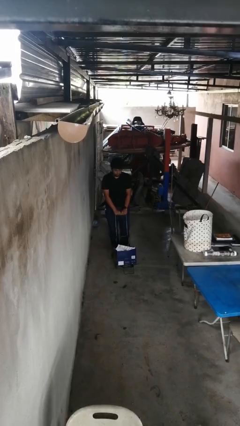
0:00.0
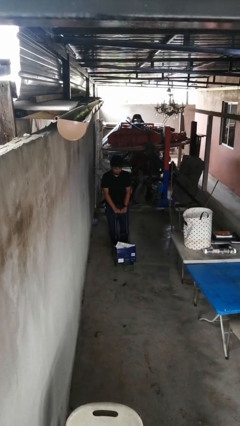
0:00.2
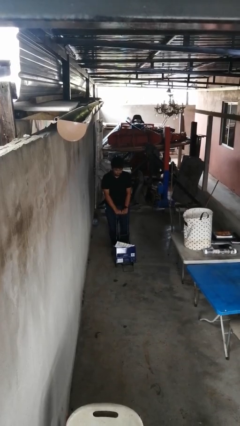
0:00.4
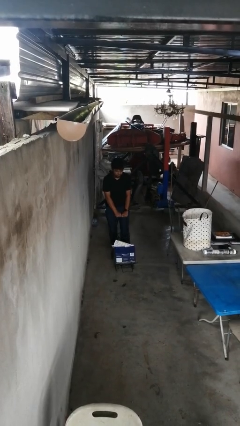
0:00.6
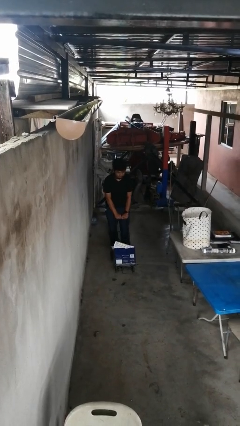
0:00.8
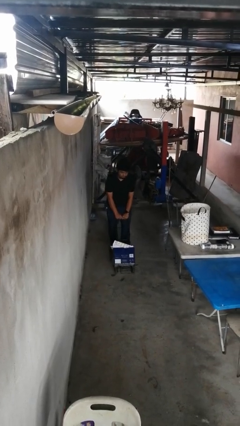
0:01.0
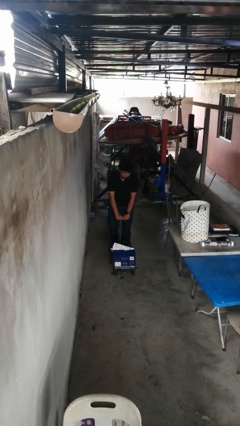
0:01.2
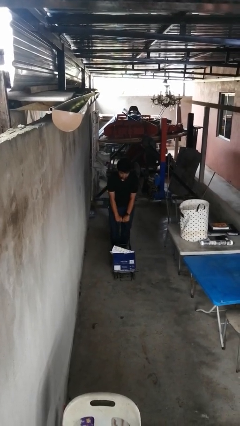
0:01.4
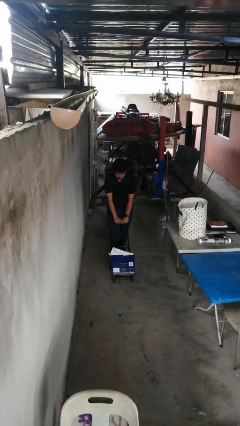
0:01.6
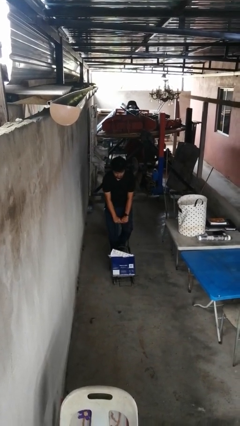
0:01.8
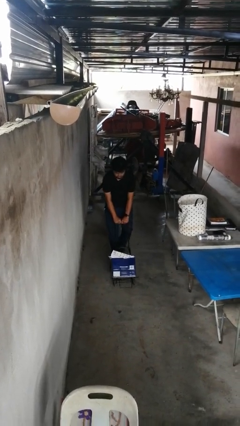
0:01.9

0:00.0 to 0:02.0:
person pushes wheeled cart

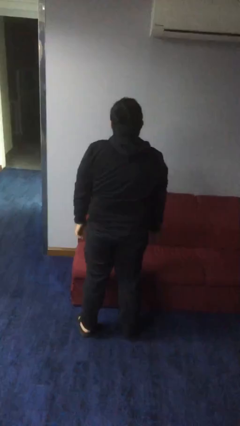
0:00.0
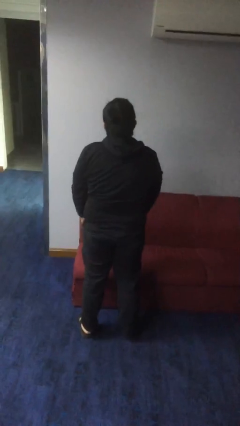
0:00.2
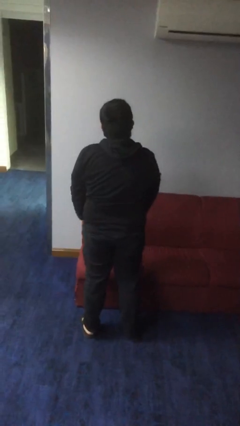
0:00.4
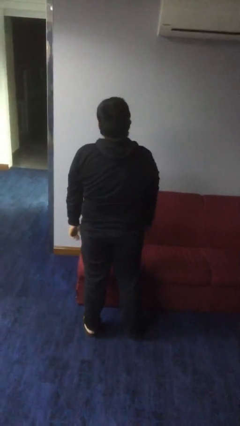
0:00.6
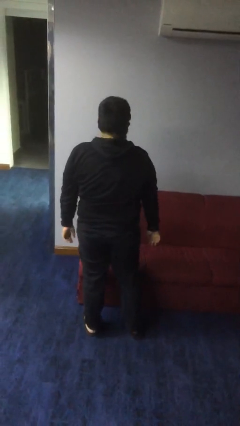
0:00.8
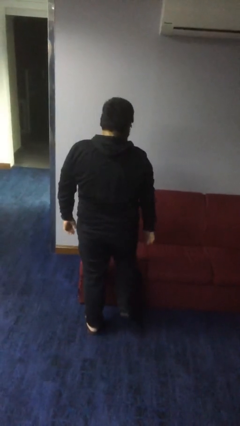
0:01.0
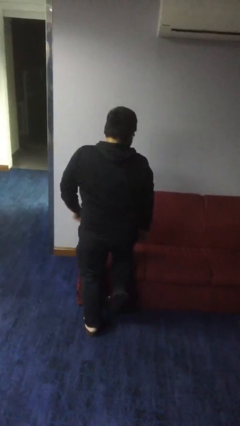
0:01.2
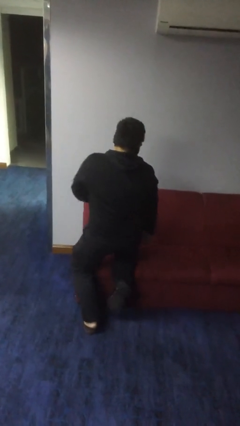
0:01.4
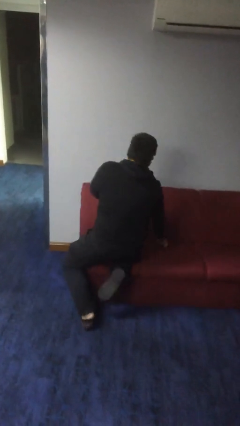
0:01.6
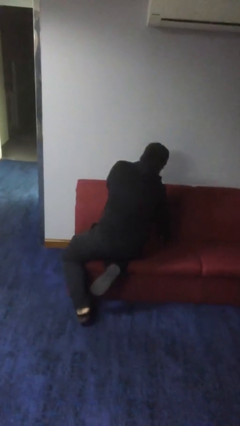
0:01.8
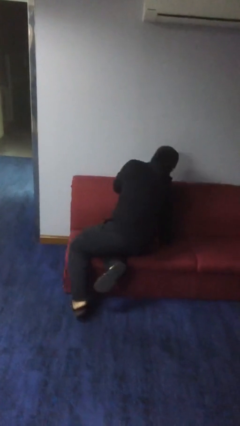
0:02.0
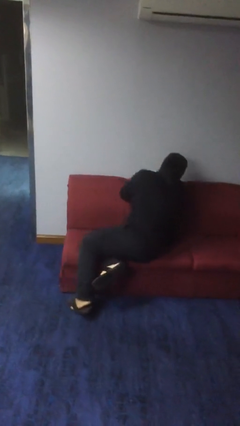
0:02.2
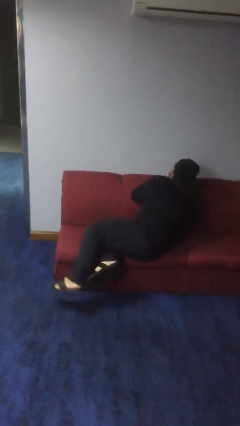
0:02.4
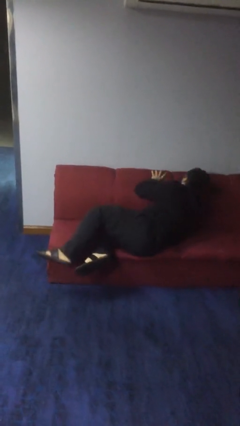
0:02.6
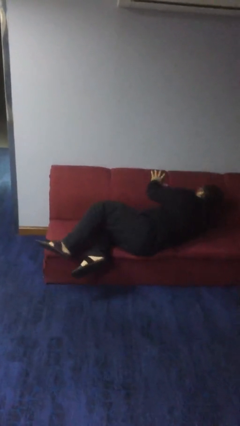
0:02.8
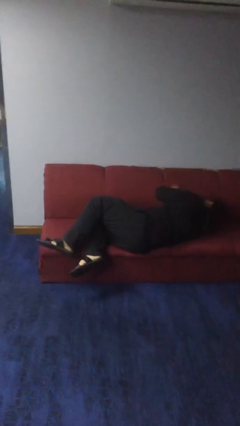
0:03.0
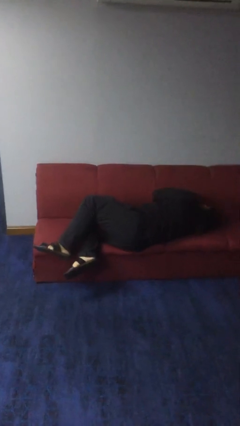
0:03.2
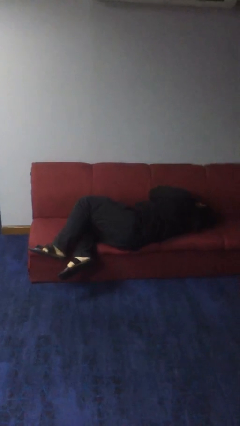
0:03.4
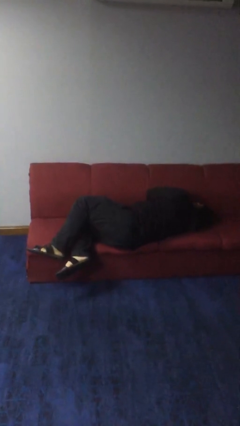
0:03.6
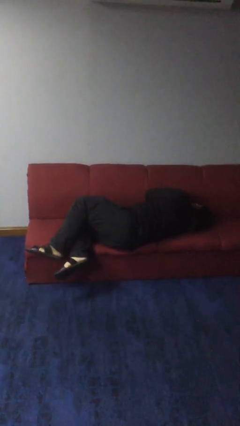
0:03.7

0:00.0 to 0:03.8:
person lies down on couch

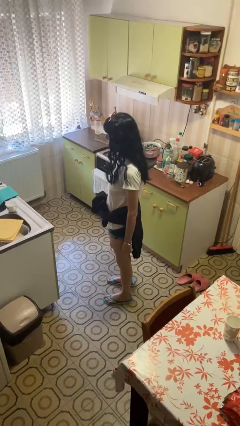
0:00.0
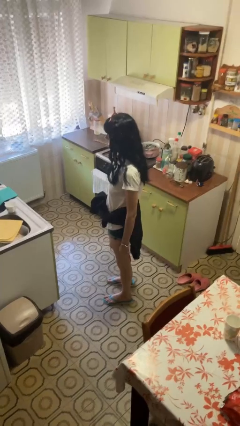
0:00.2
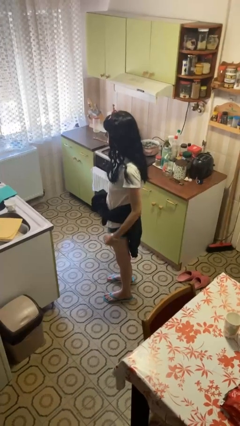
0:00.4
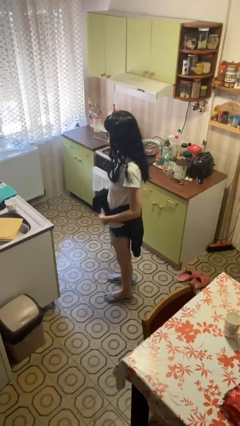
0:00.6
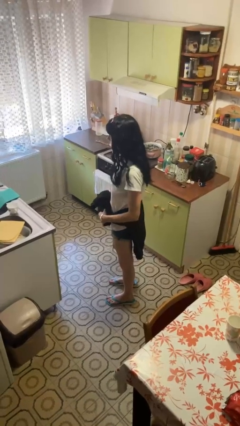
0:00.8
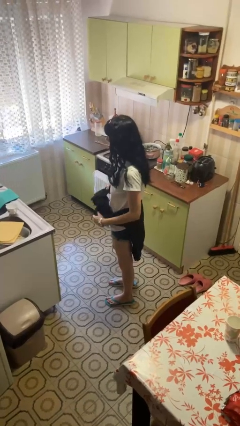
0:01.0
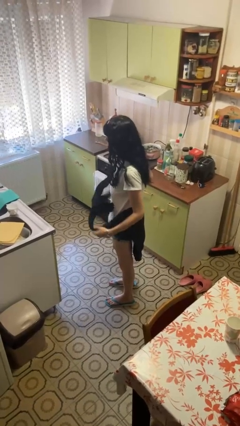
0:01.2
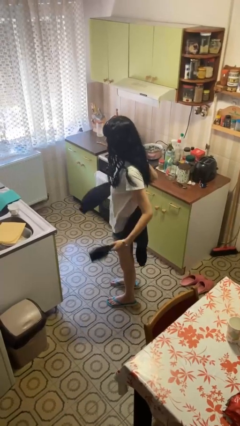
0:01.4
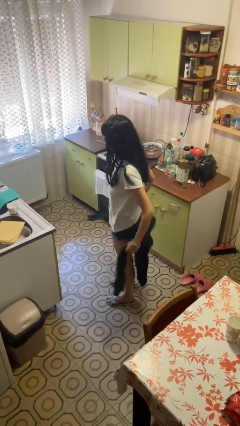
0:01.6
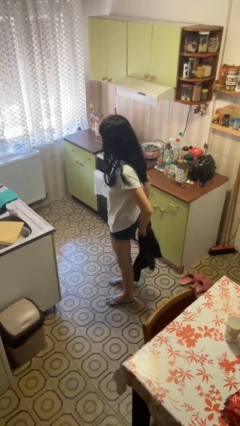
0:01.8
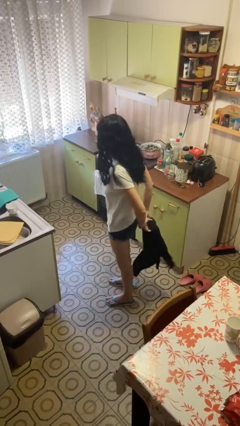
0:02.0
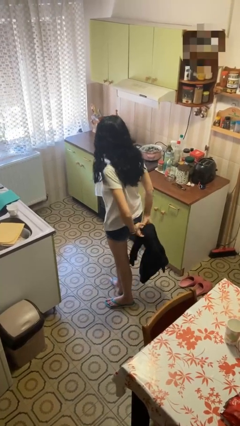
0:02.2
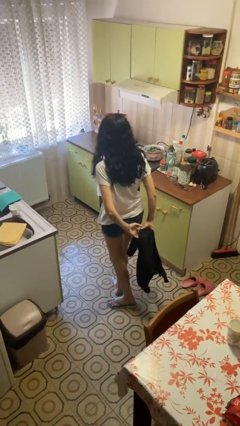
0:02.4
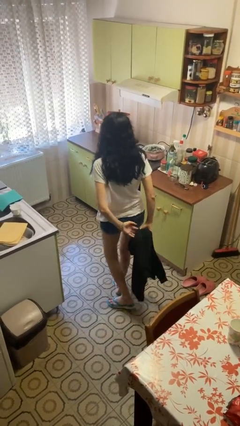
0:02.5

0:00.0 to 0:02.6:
person unties jacket around waist

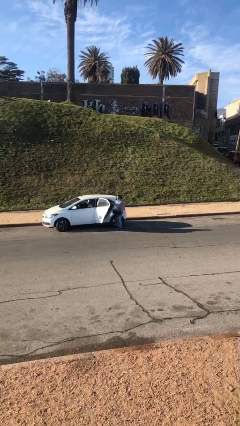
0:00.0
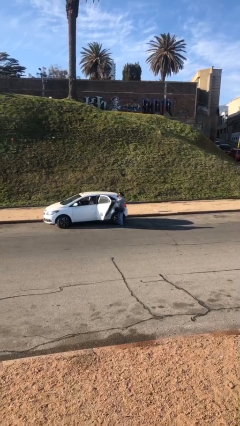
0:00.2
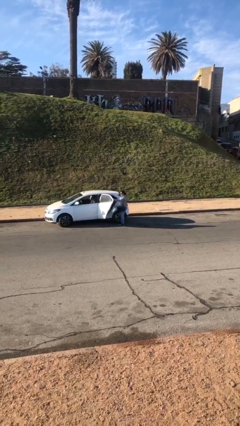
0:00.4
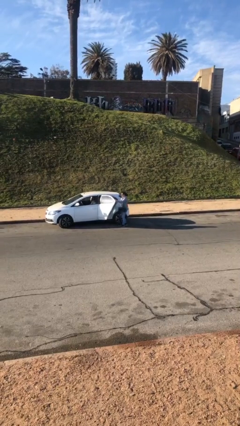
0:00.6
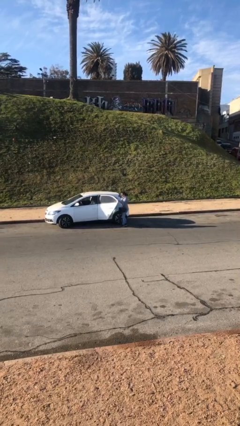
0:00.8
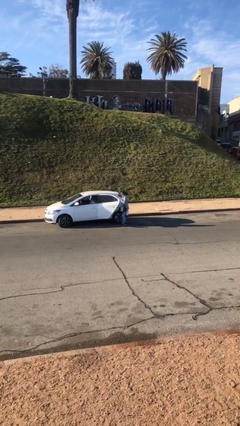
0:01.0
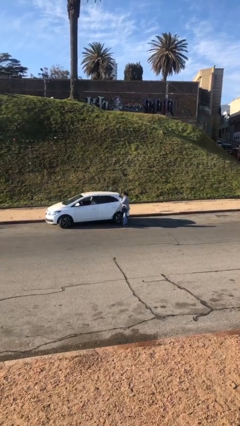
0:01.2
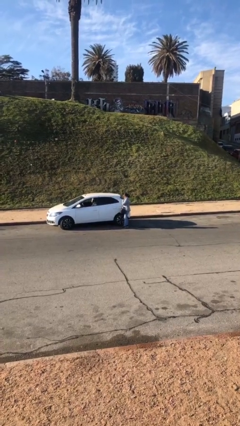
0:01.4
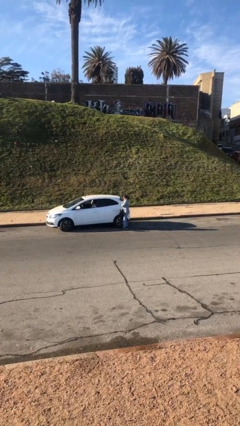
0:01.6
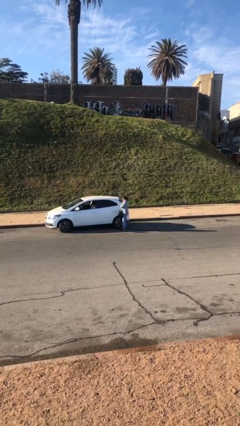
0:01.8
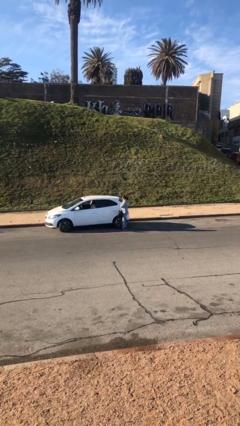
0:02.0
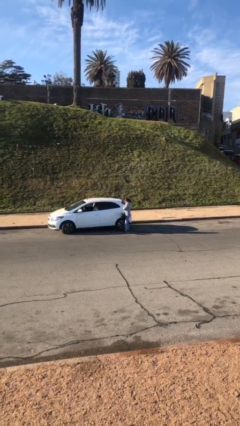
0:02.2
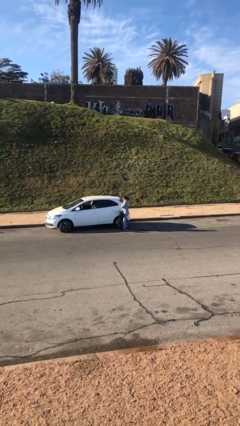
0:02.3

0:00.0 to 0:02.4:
person closes car door

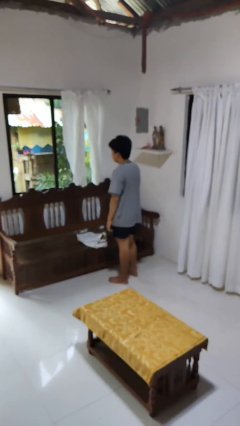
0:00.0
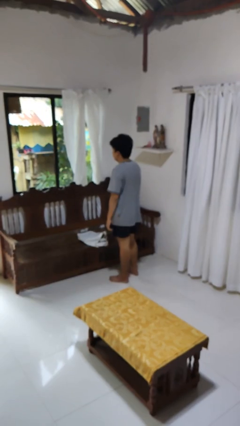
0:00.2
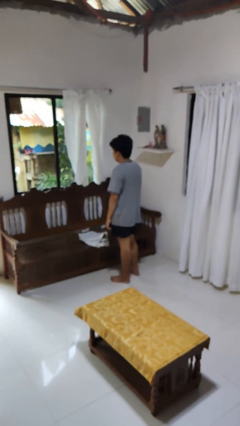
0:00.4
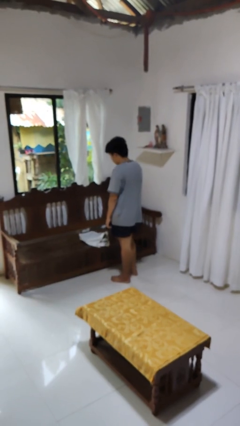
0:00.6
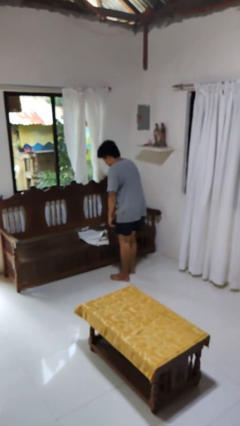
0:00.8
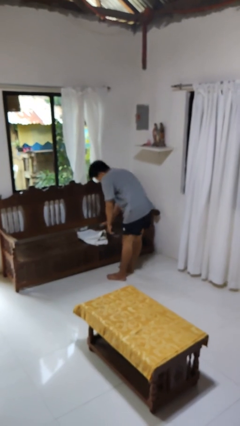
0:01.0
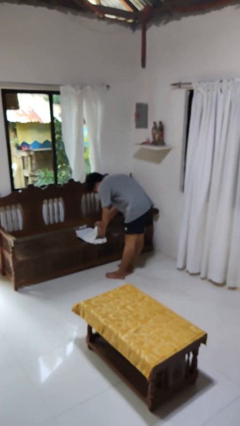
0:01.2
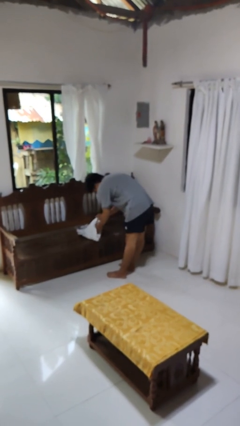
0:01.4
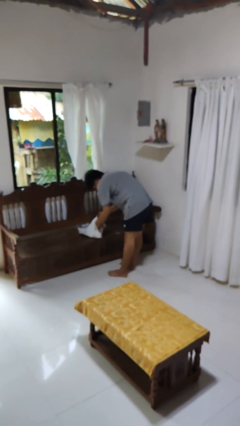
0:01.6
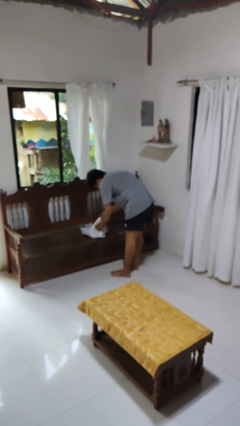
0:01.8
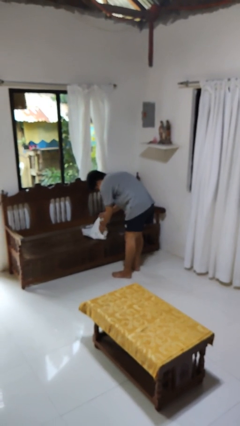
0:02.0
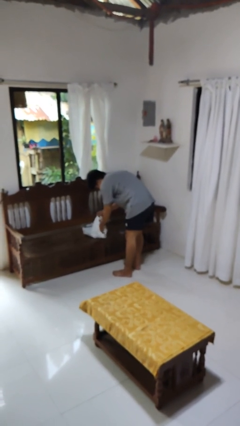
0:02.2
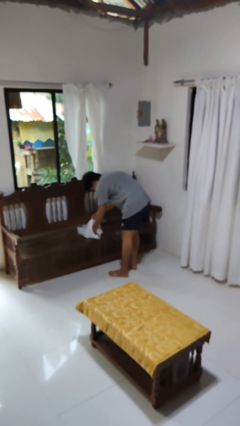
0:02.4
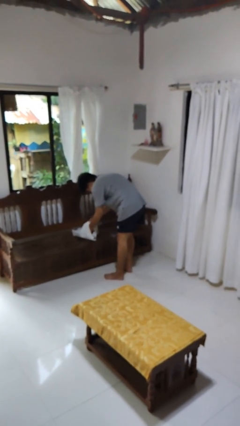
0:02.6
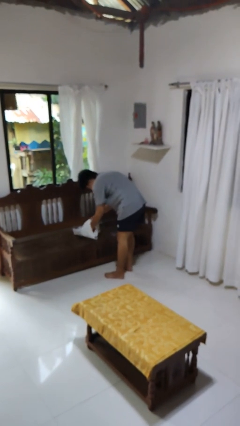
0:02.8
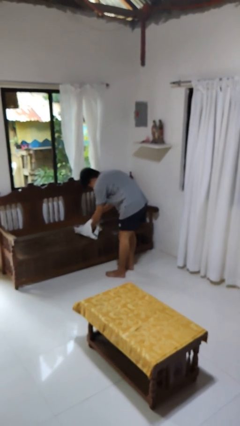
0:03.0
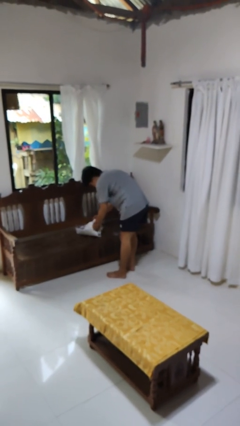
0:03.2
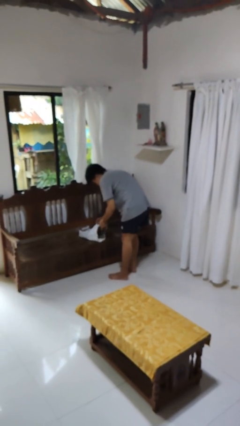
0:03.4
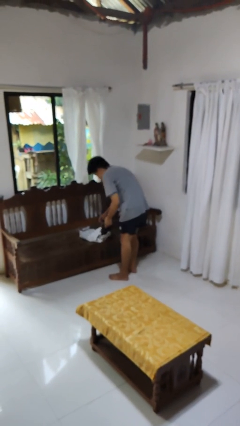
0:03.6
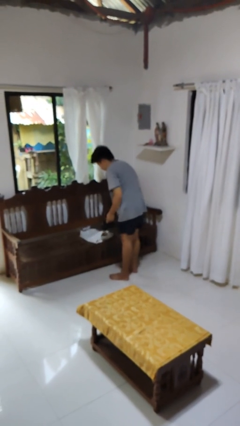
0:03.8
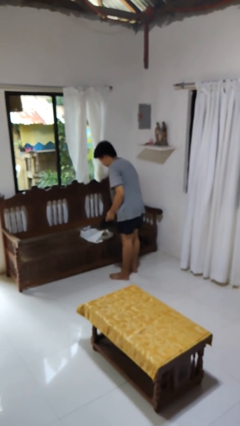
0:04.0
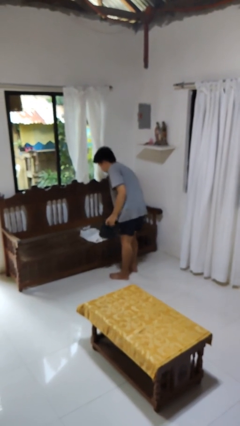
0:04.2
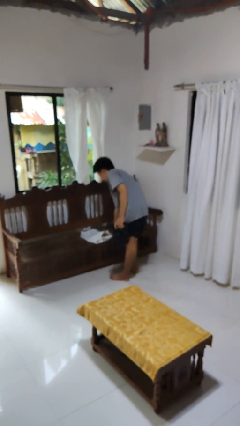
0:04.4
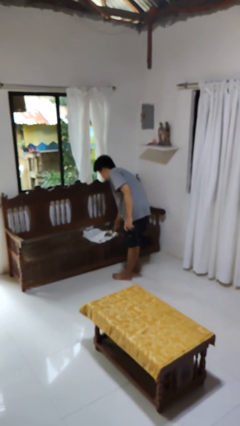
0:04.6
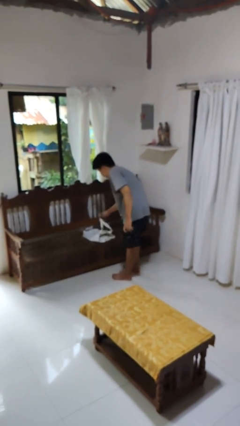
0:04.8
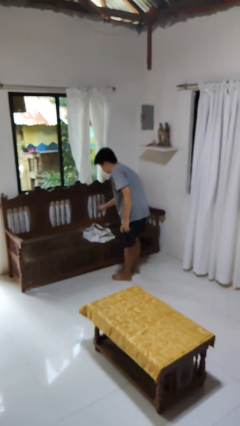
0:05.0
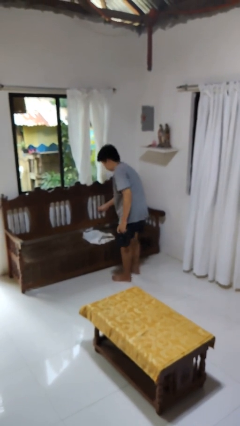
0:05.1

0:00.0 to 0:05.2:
person takes object from bag

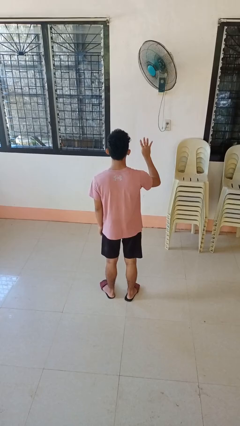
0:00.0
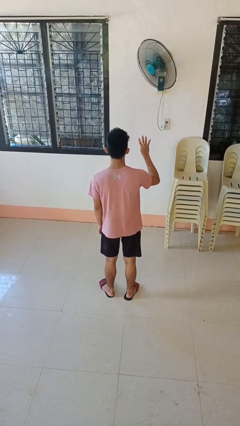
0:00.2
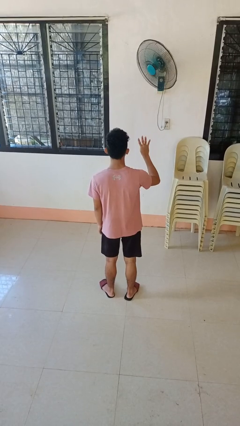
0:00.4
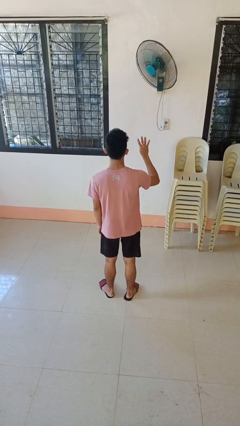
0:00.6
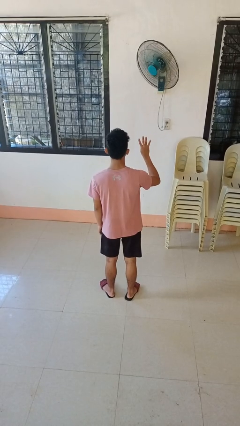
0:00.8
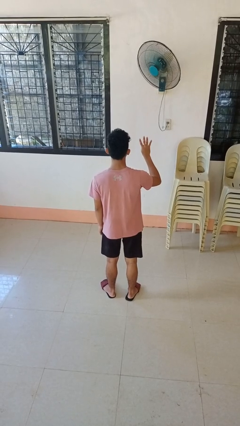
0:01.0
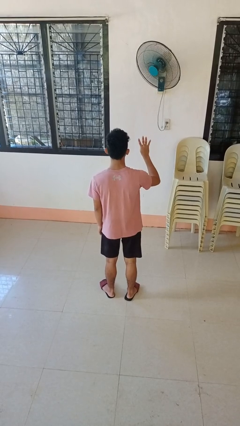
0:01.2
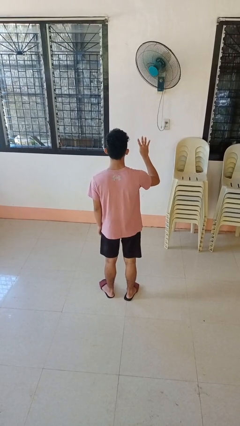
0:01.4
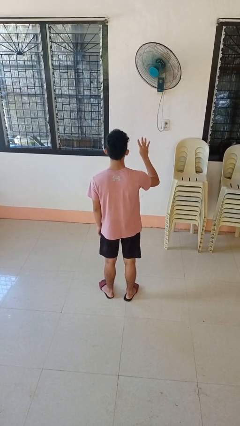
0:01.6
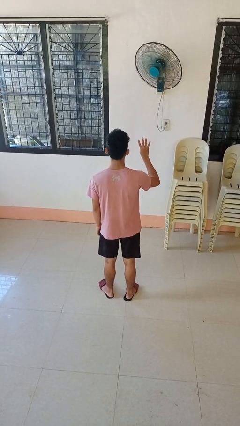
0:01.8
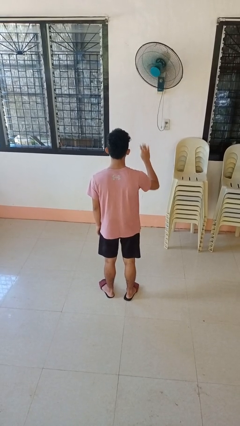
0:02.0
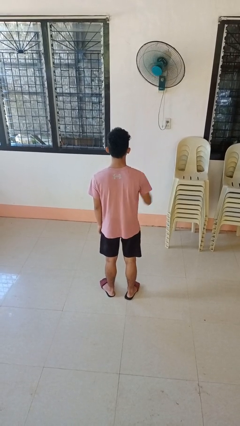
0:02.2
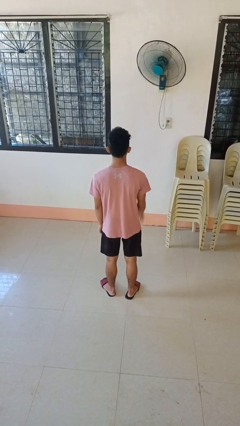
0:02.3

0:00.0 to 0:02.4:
person gestures number four
